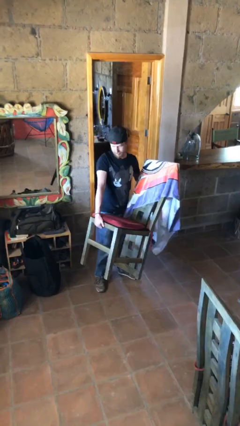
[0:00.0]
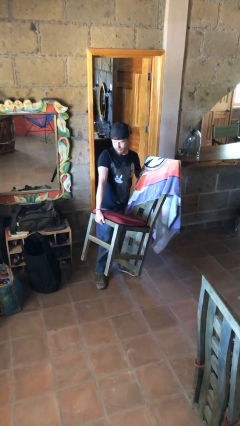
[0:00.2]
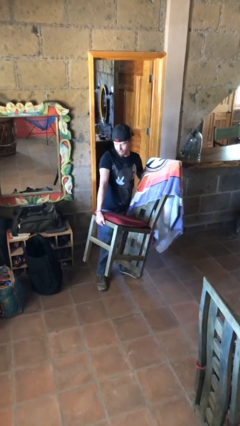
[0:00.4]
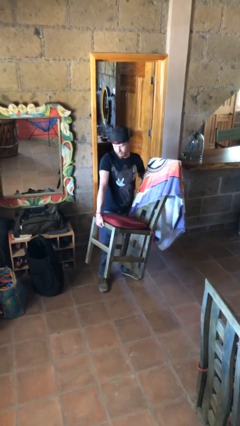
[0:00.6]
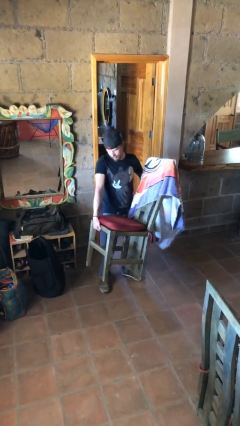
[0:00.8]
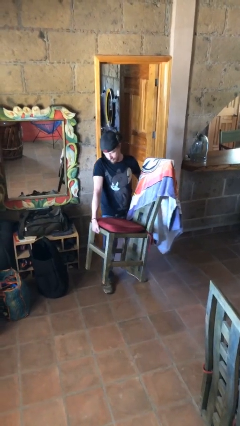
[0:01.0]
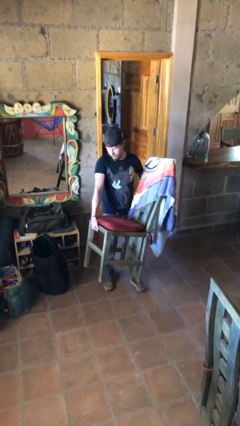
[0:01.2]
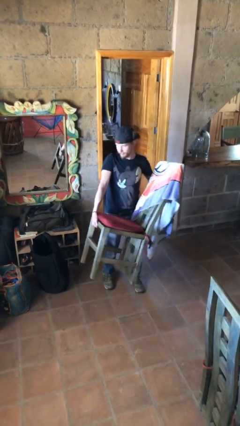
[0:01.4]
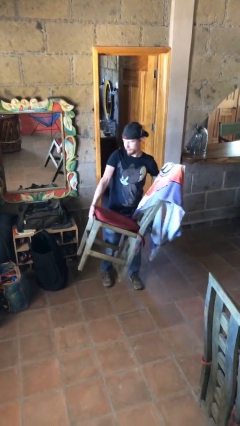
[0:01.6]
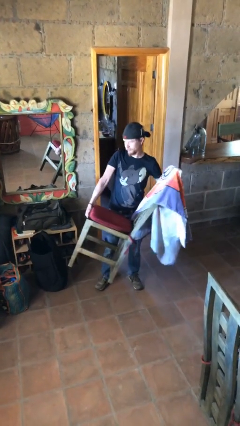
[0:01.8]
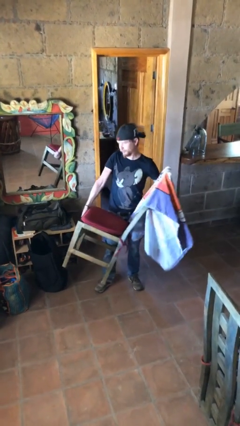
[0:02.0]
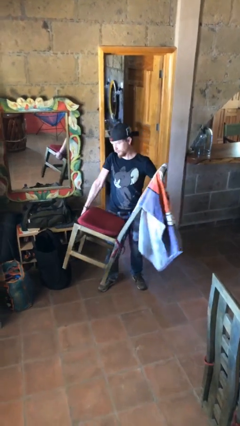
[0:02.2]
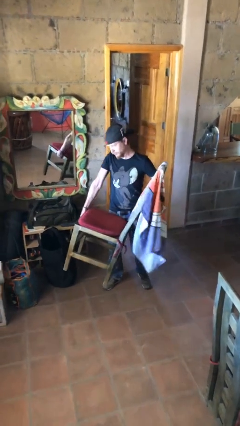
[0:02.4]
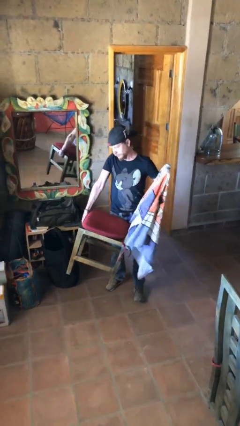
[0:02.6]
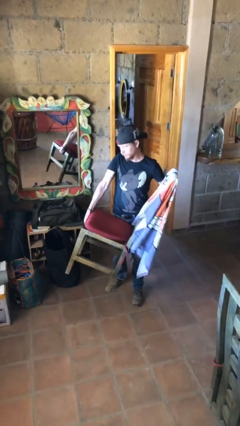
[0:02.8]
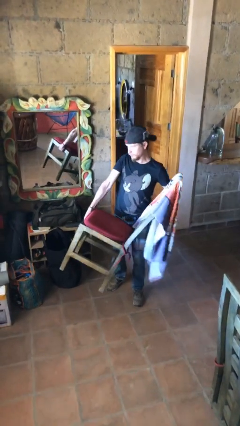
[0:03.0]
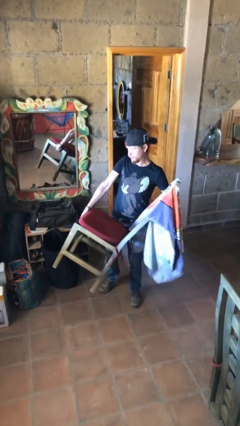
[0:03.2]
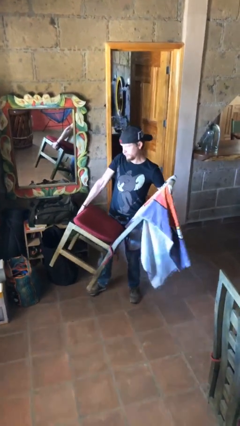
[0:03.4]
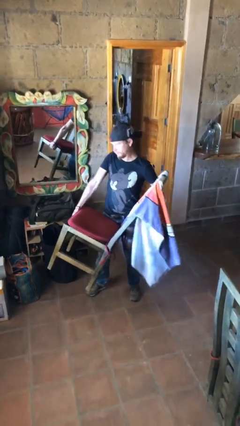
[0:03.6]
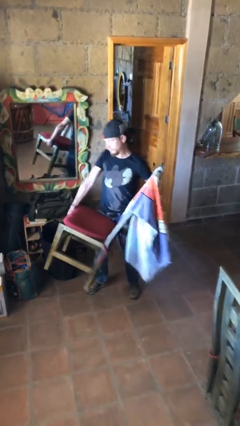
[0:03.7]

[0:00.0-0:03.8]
person carries heavy object

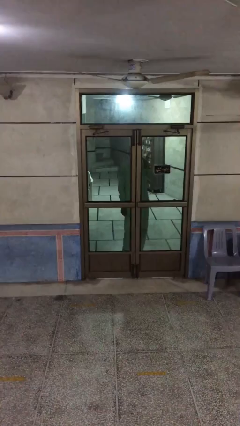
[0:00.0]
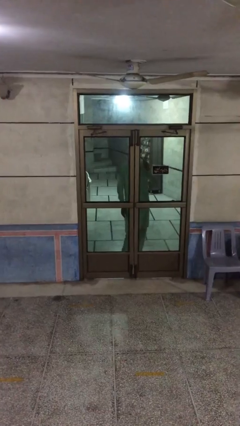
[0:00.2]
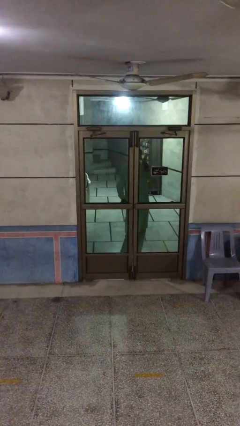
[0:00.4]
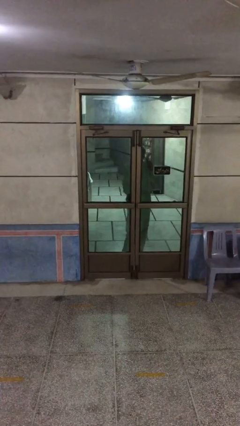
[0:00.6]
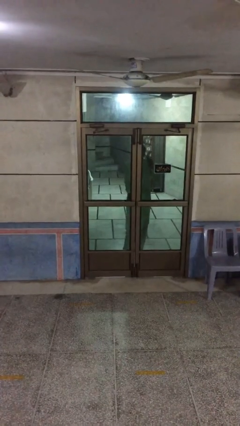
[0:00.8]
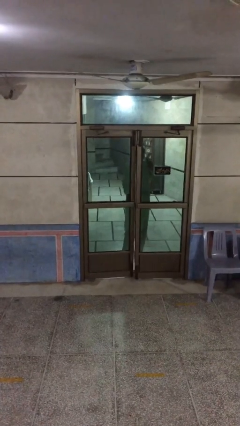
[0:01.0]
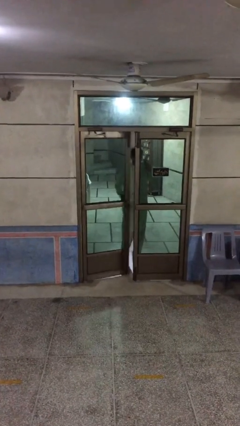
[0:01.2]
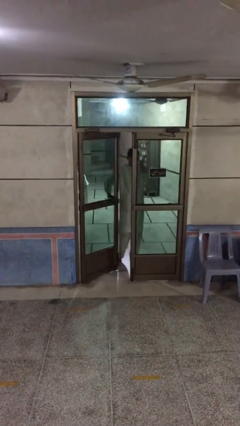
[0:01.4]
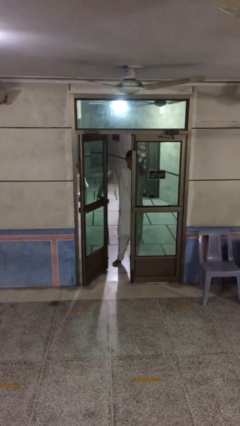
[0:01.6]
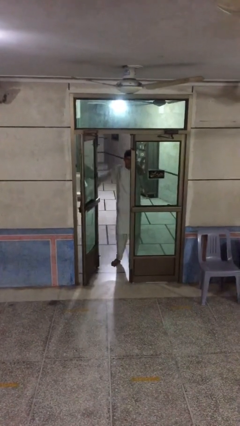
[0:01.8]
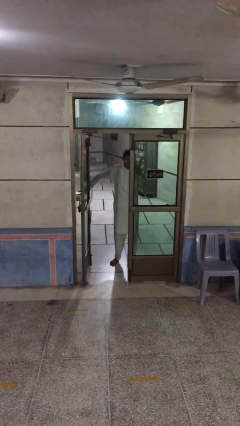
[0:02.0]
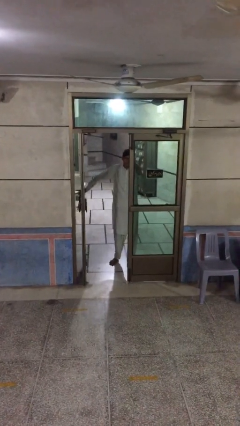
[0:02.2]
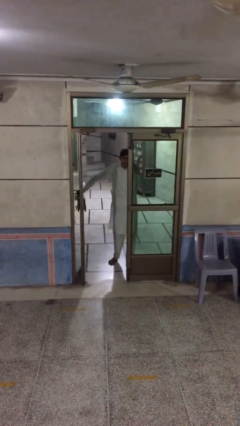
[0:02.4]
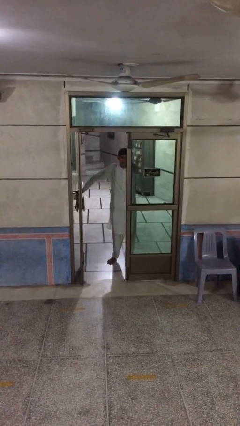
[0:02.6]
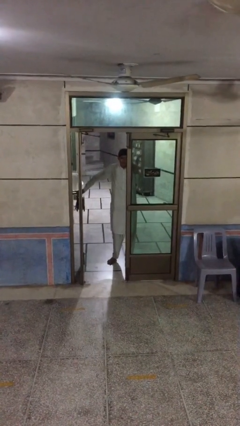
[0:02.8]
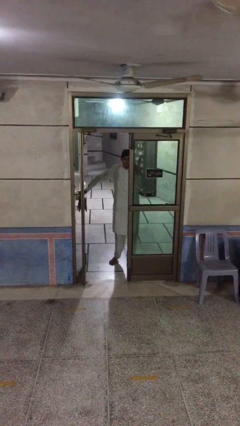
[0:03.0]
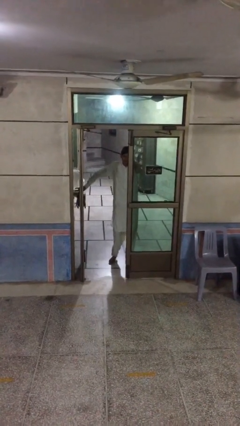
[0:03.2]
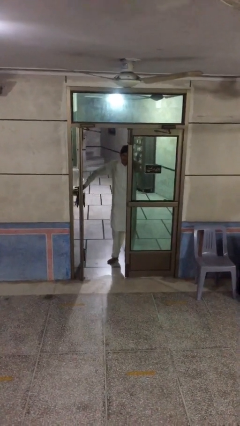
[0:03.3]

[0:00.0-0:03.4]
person opens facility door

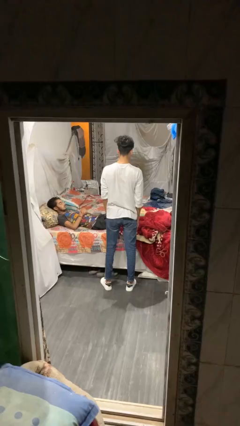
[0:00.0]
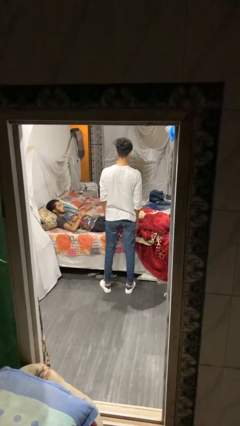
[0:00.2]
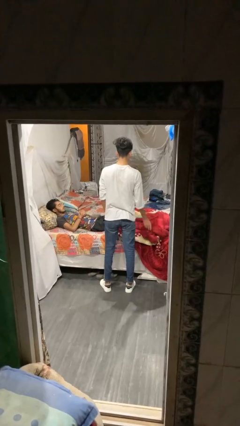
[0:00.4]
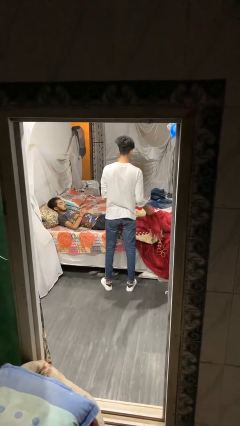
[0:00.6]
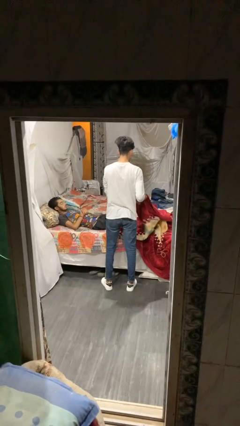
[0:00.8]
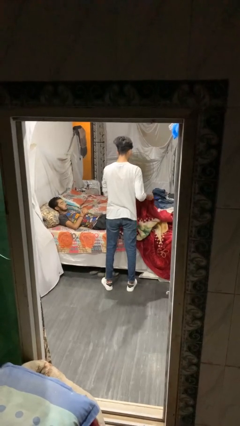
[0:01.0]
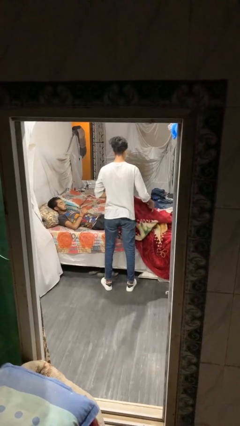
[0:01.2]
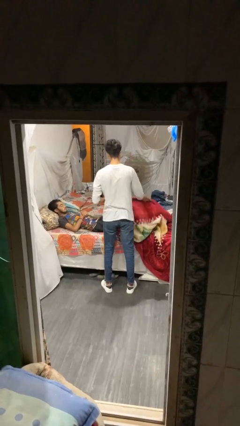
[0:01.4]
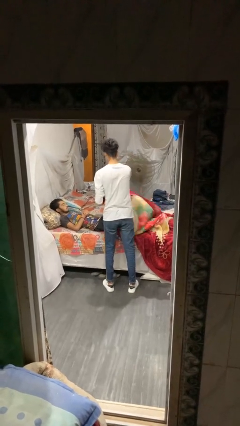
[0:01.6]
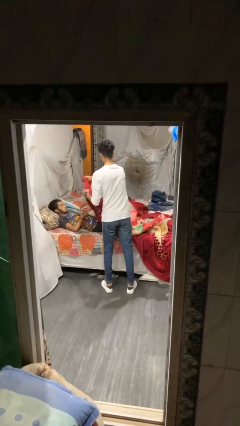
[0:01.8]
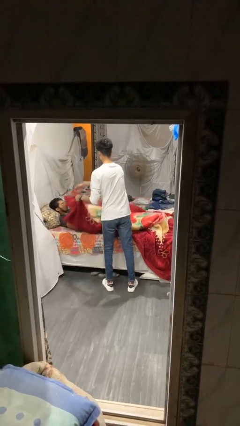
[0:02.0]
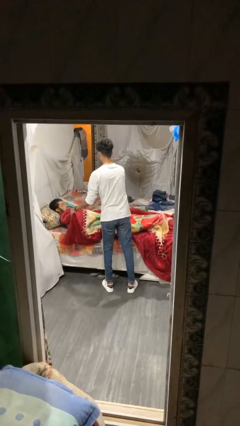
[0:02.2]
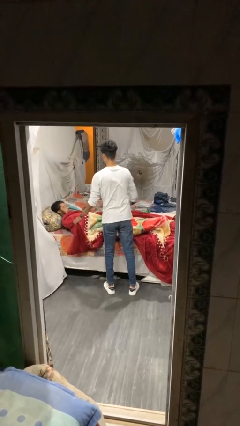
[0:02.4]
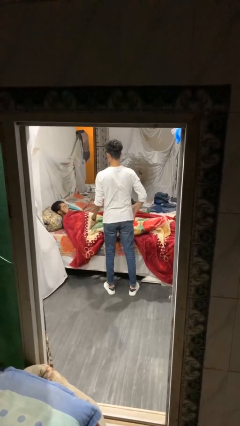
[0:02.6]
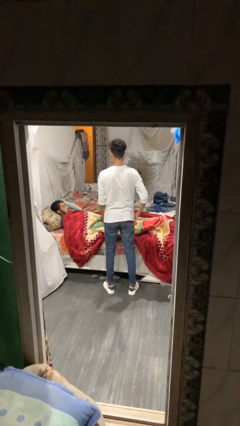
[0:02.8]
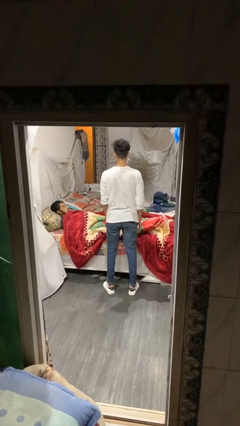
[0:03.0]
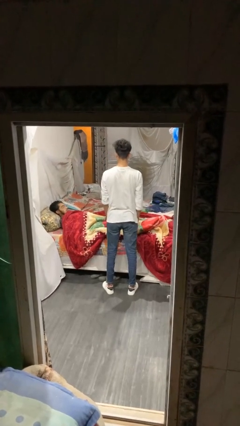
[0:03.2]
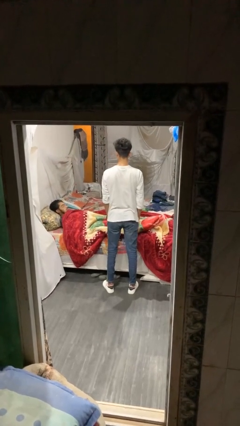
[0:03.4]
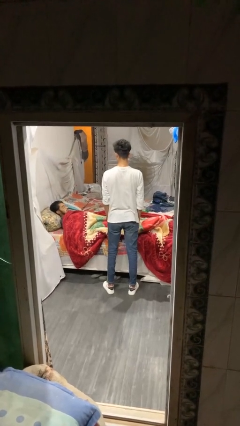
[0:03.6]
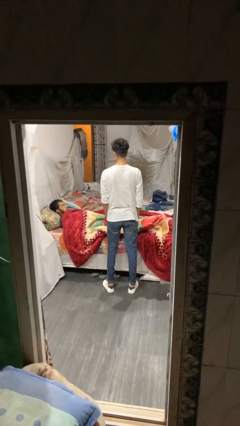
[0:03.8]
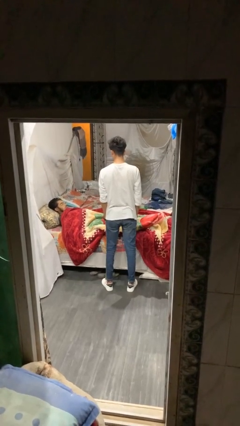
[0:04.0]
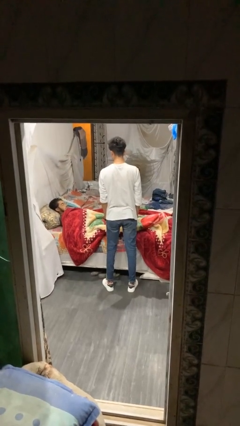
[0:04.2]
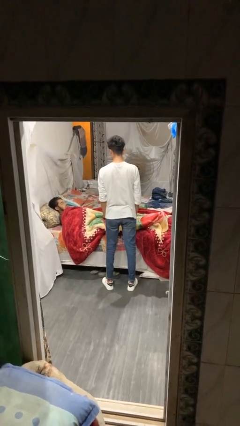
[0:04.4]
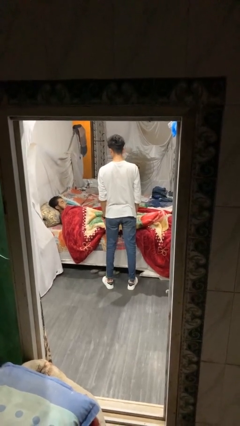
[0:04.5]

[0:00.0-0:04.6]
person covers friend with blanket

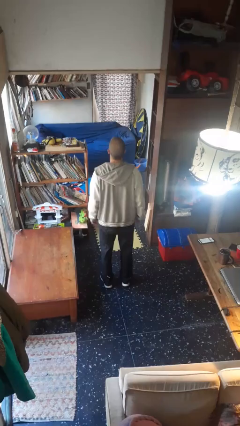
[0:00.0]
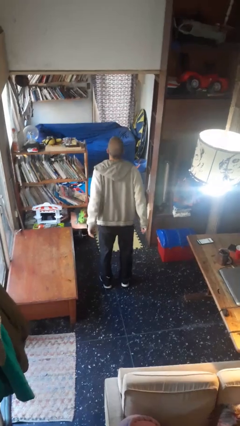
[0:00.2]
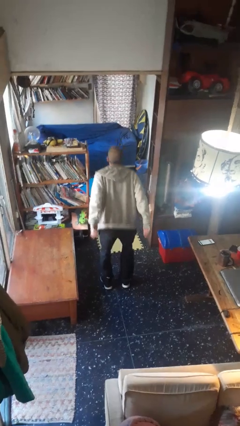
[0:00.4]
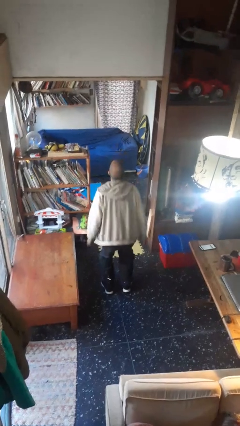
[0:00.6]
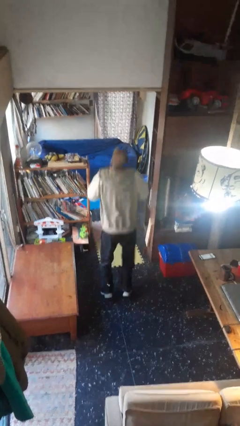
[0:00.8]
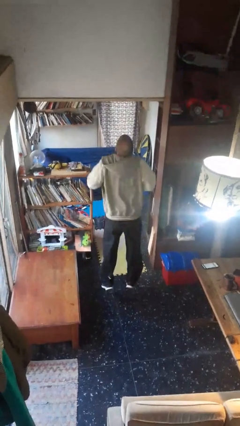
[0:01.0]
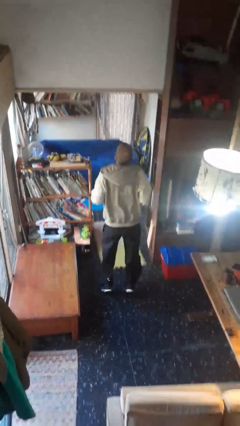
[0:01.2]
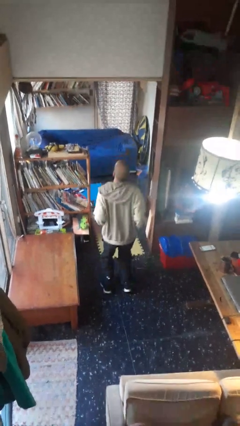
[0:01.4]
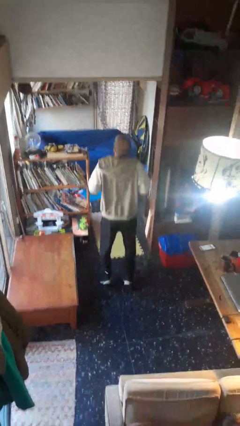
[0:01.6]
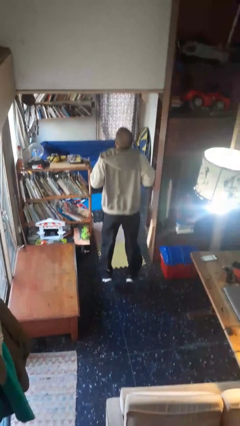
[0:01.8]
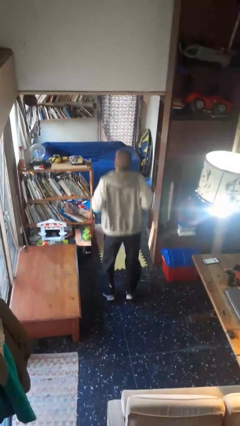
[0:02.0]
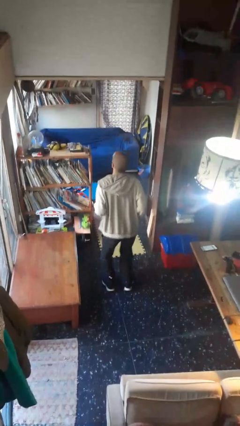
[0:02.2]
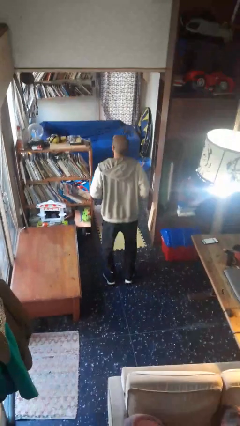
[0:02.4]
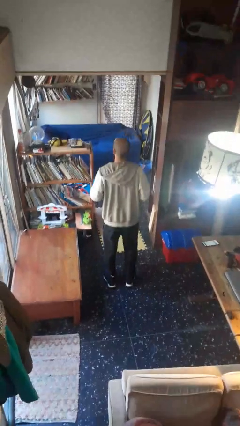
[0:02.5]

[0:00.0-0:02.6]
person jumps

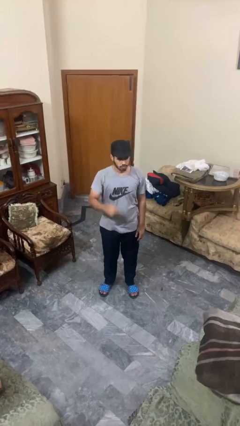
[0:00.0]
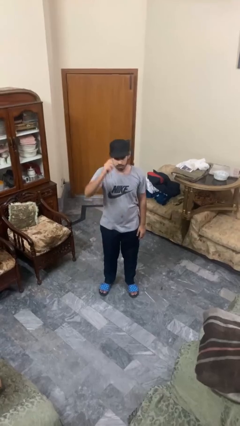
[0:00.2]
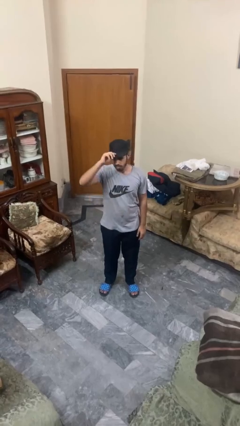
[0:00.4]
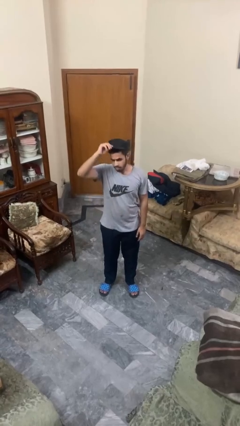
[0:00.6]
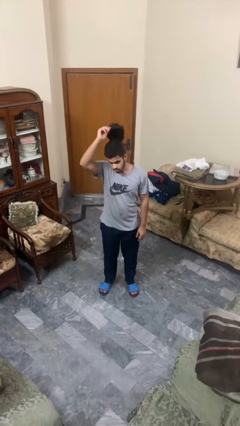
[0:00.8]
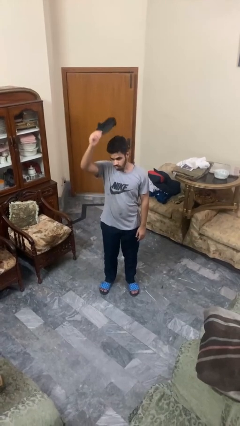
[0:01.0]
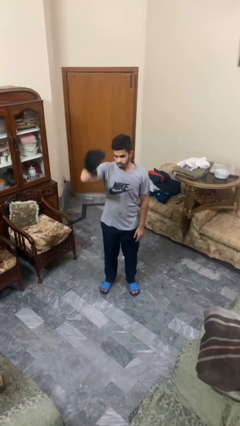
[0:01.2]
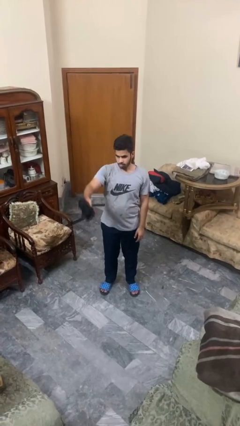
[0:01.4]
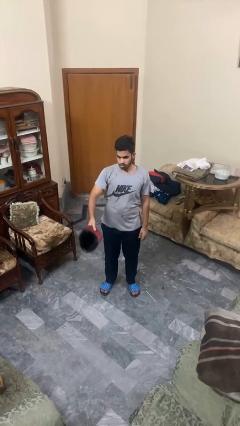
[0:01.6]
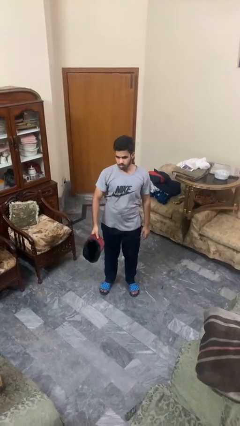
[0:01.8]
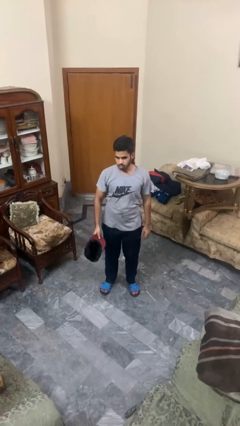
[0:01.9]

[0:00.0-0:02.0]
person takes off hat

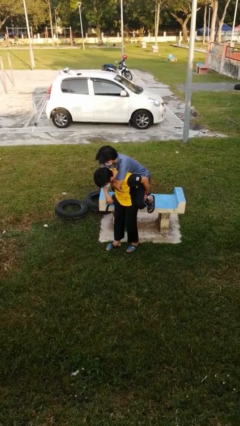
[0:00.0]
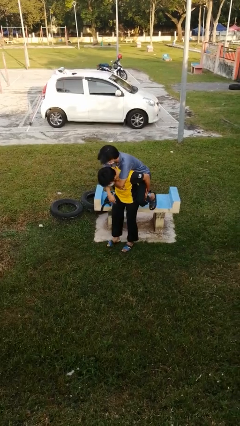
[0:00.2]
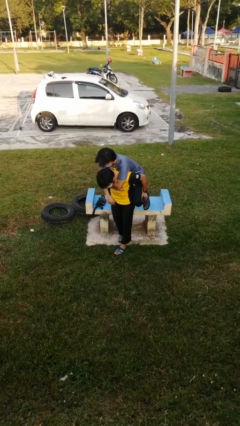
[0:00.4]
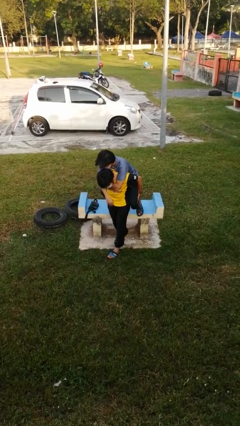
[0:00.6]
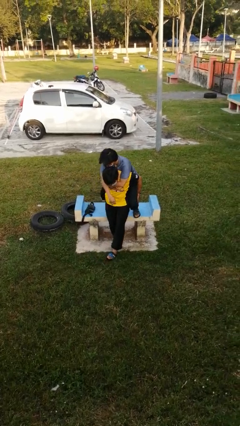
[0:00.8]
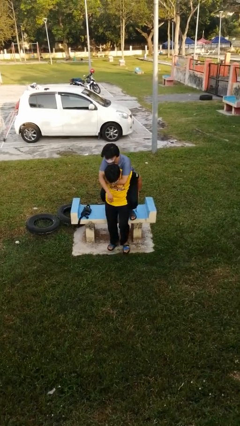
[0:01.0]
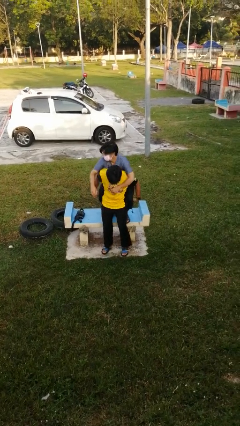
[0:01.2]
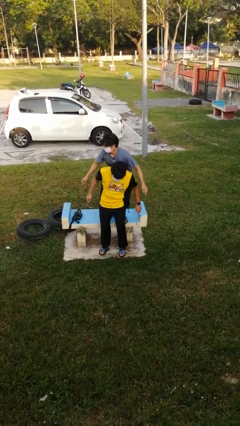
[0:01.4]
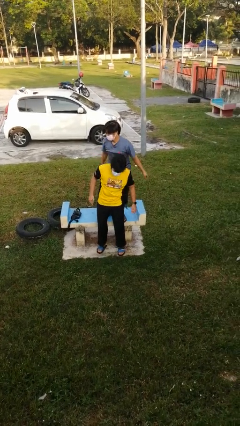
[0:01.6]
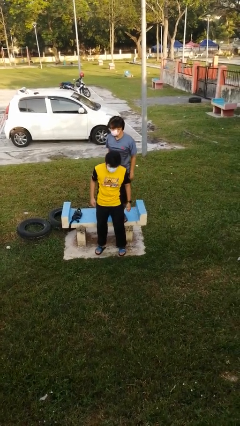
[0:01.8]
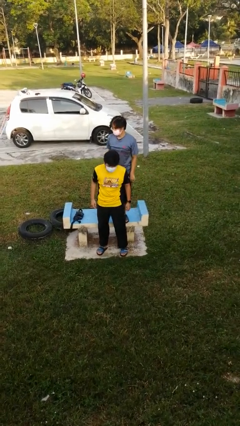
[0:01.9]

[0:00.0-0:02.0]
person puts down person
